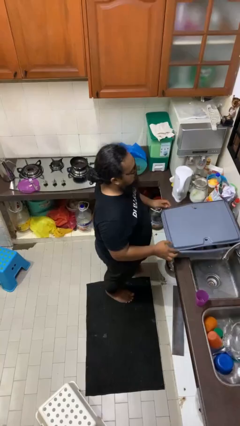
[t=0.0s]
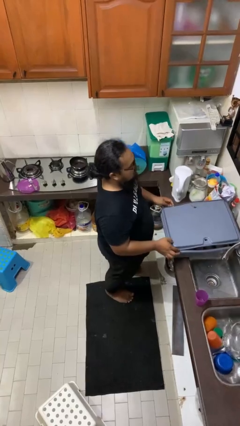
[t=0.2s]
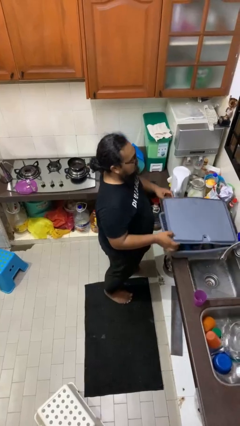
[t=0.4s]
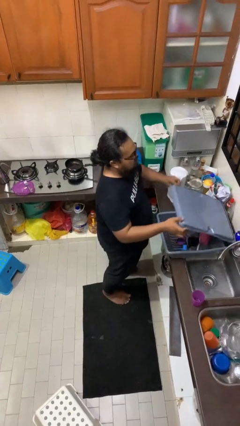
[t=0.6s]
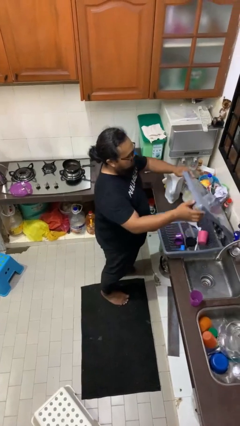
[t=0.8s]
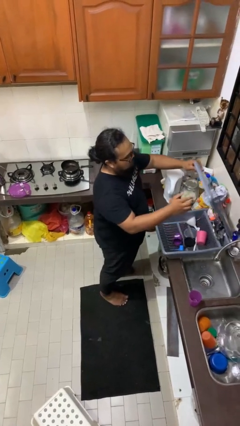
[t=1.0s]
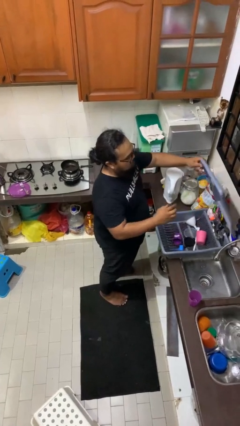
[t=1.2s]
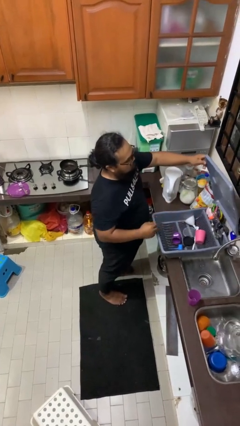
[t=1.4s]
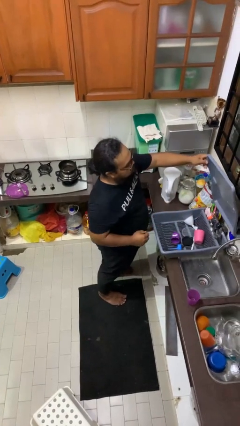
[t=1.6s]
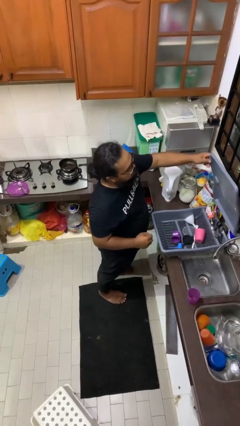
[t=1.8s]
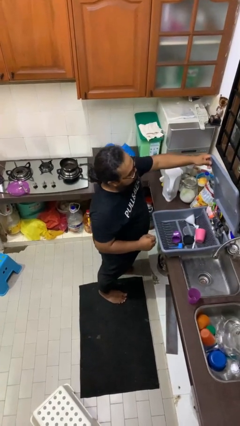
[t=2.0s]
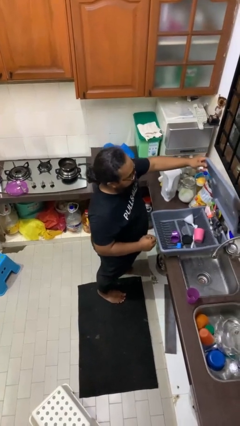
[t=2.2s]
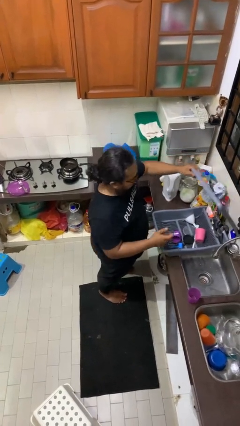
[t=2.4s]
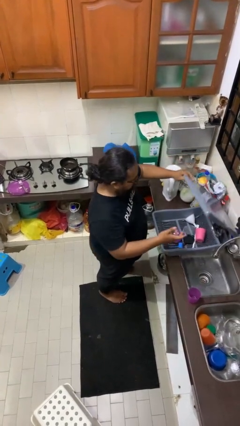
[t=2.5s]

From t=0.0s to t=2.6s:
person opens dishwasher

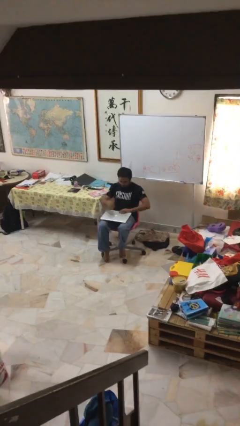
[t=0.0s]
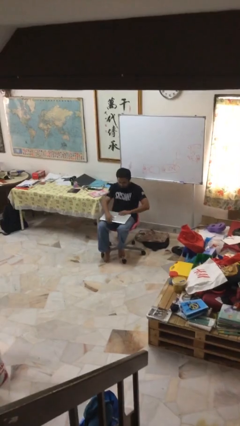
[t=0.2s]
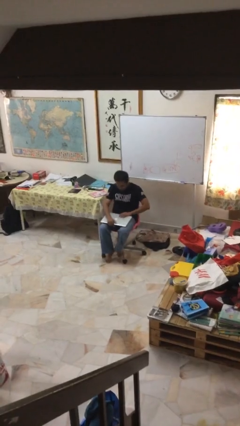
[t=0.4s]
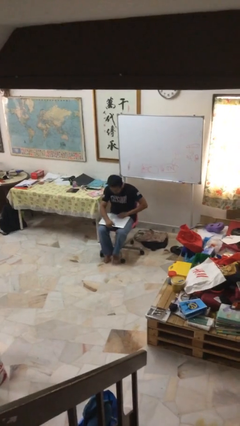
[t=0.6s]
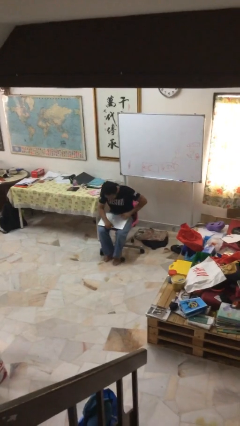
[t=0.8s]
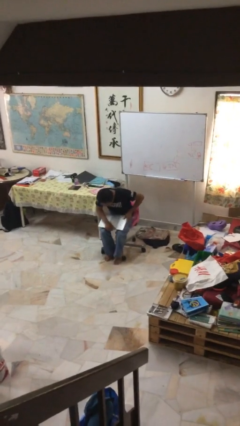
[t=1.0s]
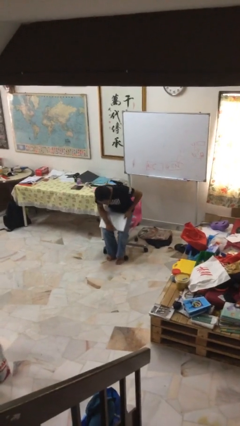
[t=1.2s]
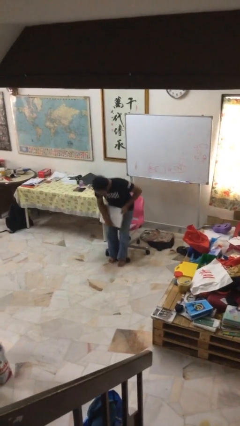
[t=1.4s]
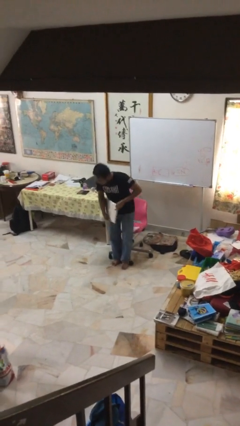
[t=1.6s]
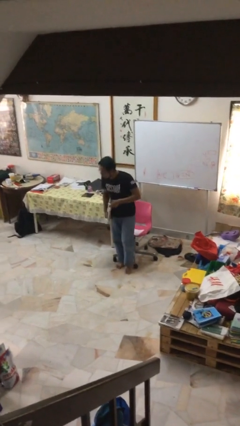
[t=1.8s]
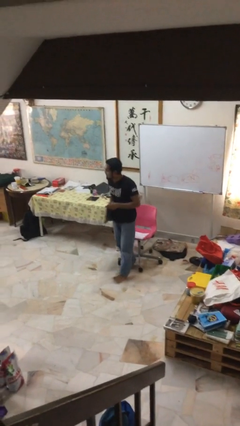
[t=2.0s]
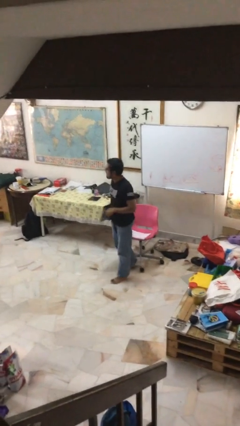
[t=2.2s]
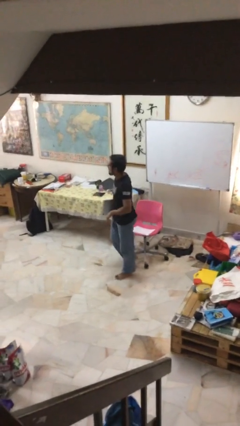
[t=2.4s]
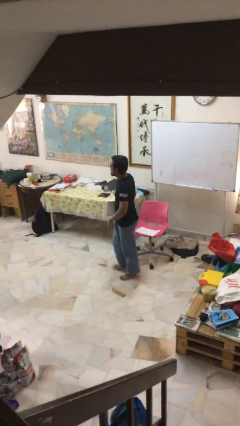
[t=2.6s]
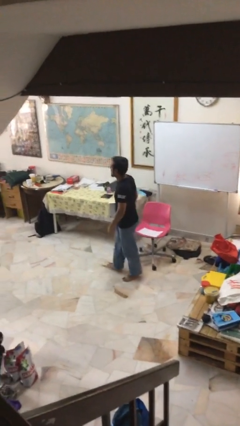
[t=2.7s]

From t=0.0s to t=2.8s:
person stands up

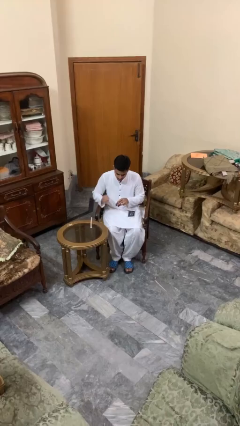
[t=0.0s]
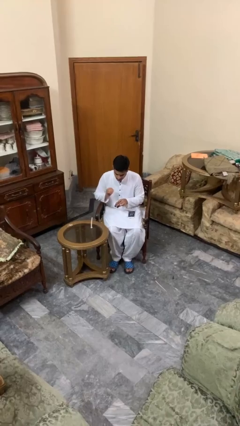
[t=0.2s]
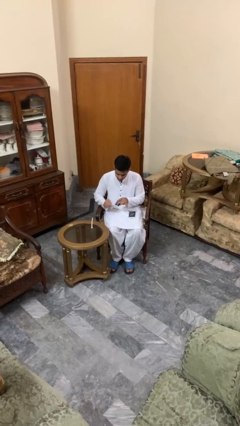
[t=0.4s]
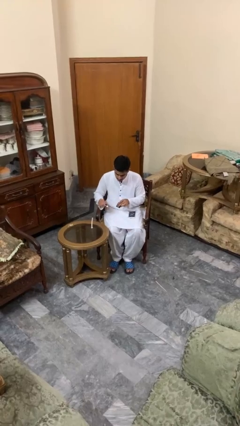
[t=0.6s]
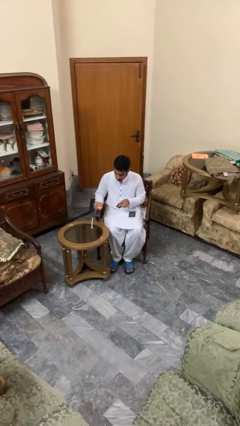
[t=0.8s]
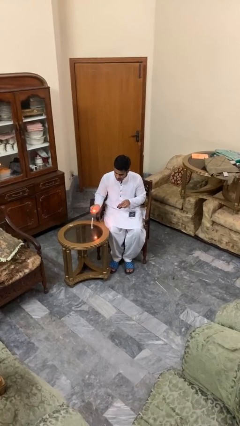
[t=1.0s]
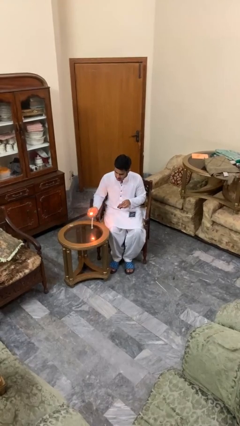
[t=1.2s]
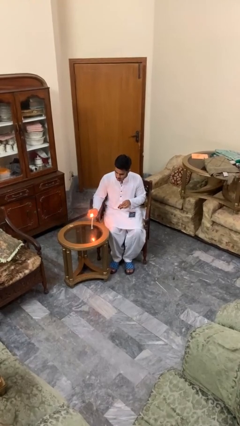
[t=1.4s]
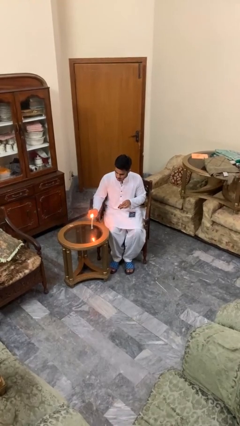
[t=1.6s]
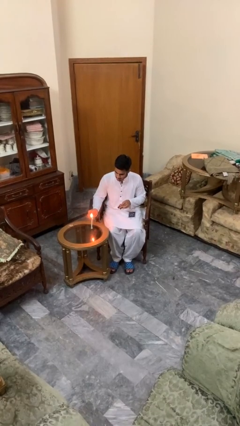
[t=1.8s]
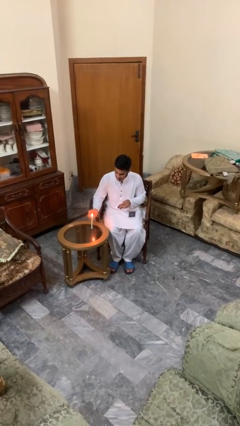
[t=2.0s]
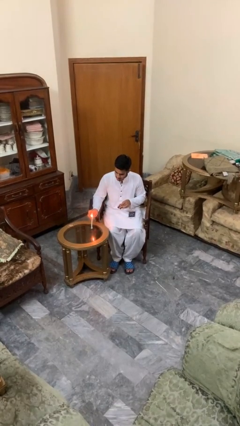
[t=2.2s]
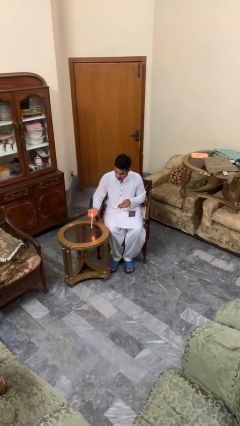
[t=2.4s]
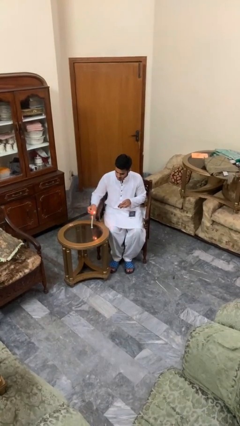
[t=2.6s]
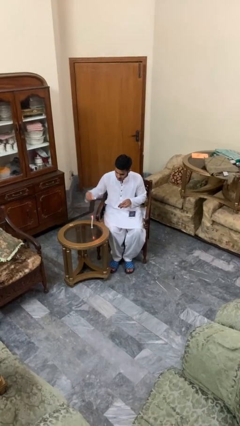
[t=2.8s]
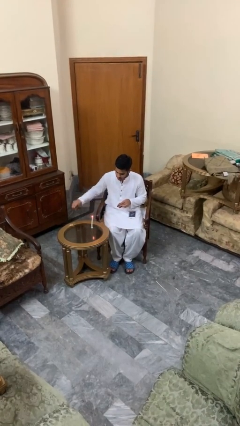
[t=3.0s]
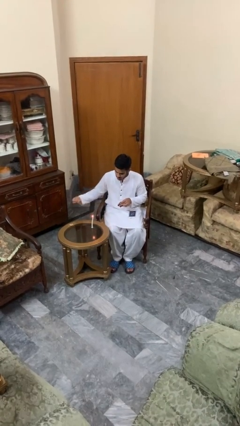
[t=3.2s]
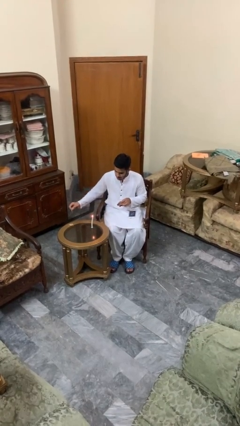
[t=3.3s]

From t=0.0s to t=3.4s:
person lights candle

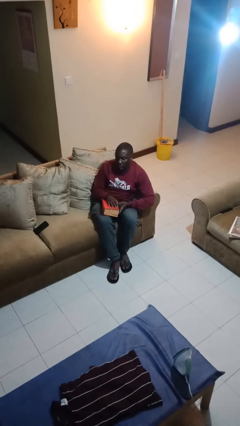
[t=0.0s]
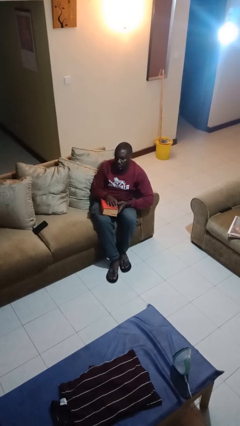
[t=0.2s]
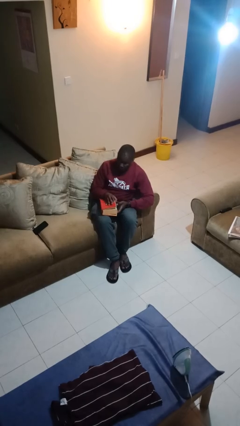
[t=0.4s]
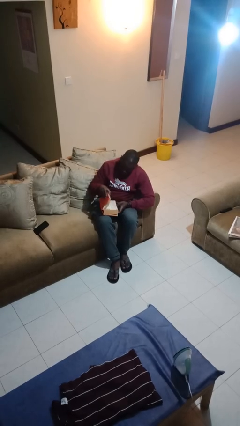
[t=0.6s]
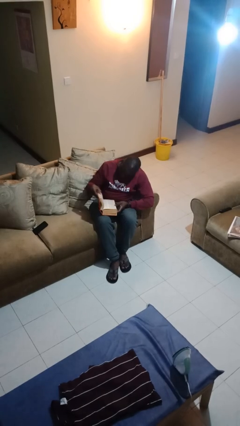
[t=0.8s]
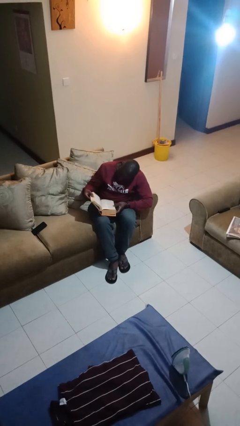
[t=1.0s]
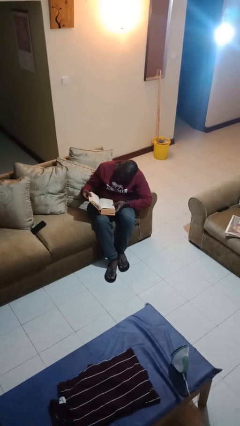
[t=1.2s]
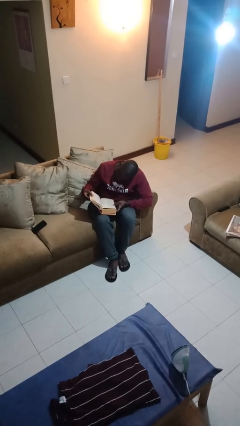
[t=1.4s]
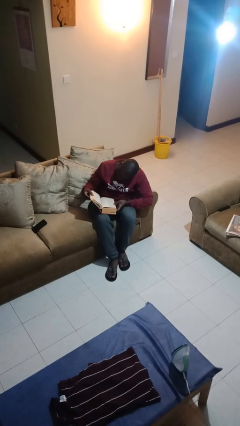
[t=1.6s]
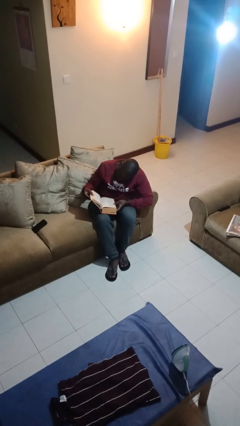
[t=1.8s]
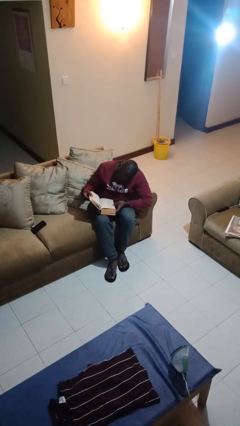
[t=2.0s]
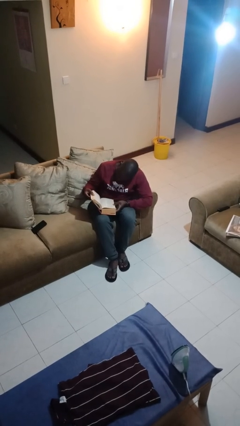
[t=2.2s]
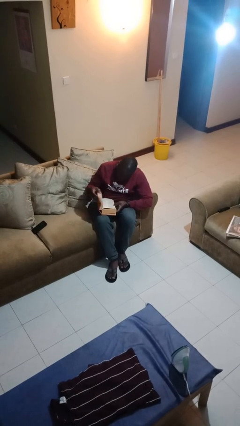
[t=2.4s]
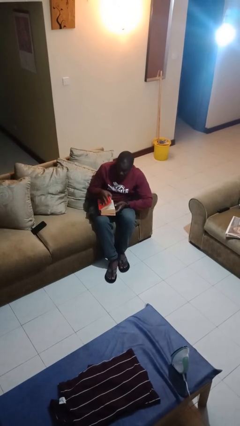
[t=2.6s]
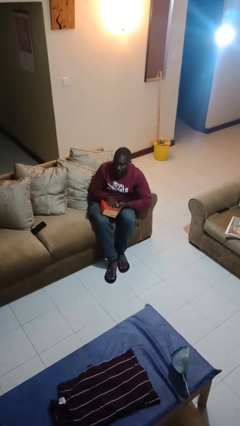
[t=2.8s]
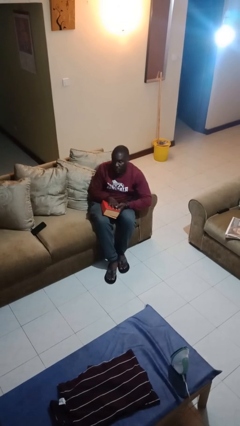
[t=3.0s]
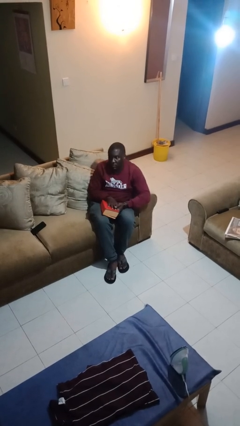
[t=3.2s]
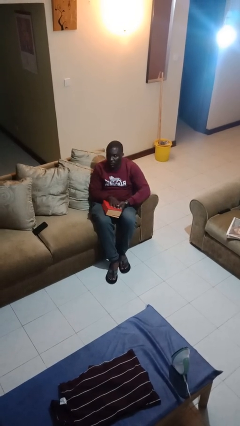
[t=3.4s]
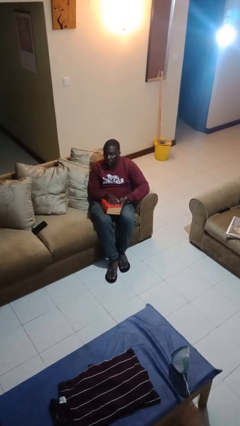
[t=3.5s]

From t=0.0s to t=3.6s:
person reads book

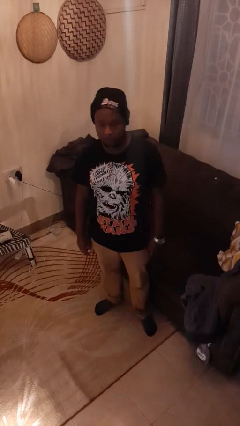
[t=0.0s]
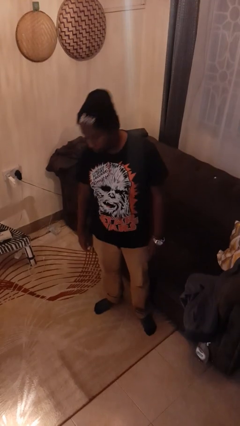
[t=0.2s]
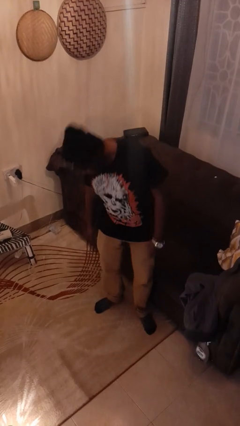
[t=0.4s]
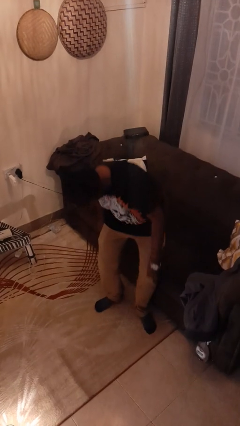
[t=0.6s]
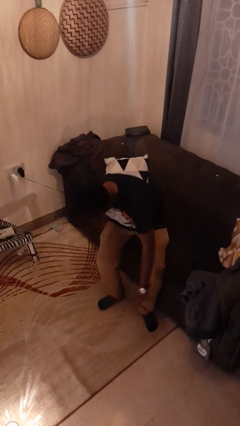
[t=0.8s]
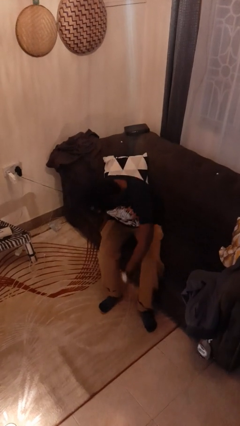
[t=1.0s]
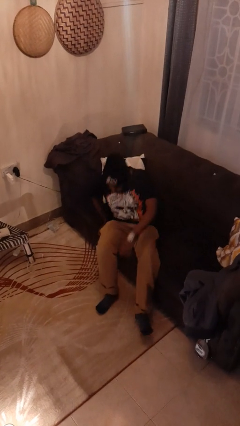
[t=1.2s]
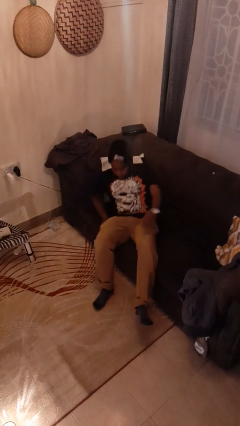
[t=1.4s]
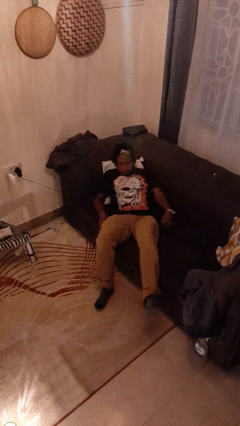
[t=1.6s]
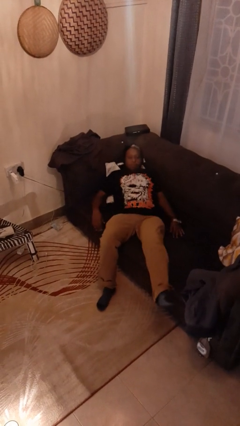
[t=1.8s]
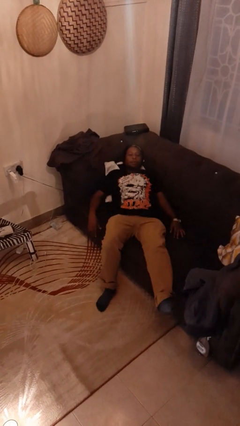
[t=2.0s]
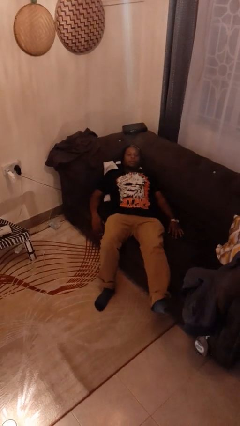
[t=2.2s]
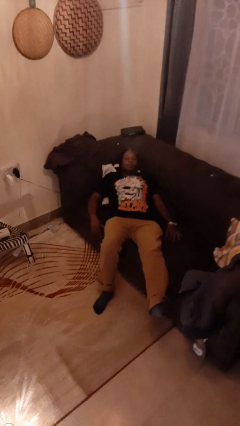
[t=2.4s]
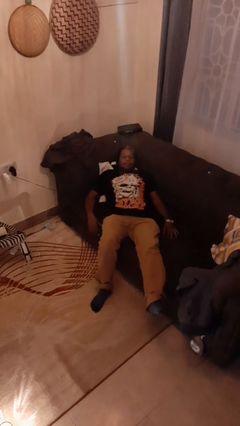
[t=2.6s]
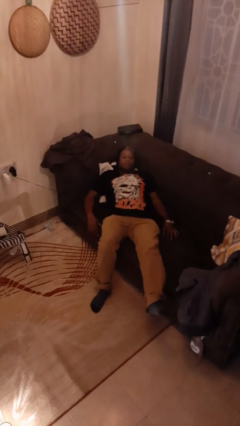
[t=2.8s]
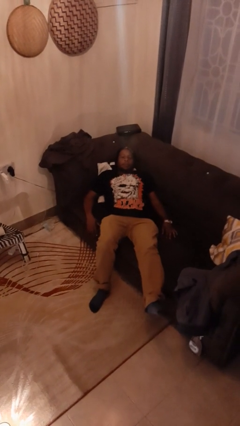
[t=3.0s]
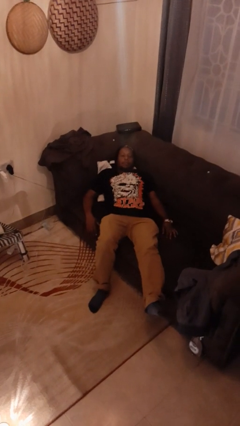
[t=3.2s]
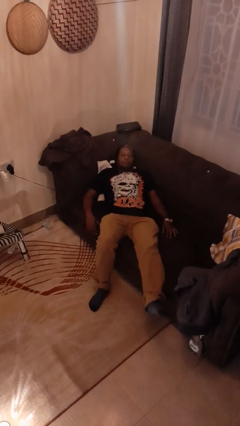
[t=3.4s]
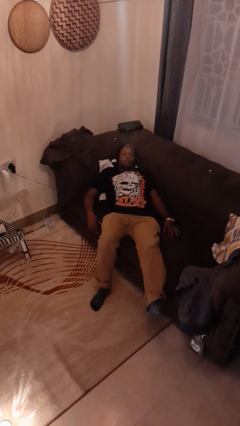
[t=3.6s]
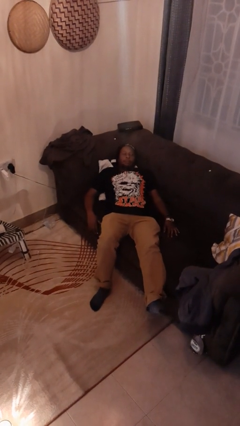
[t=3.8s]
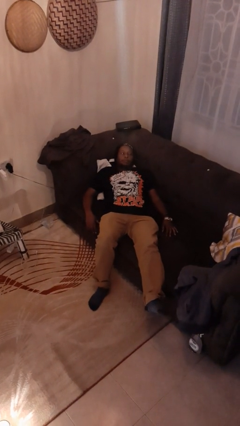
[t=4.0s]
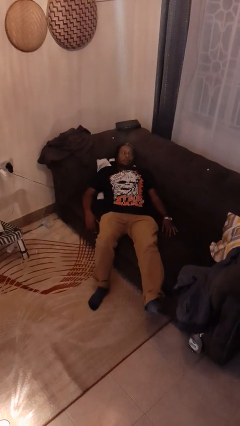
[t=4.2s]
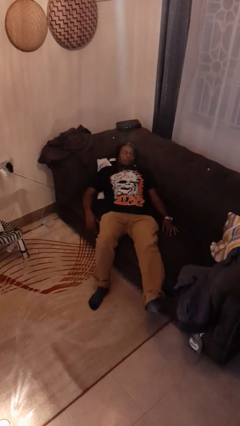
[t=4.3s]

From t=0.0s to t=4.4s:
person lies down on couch

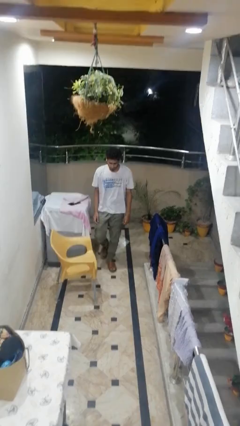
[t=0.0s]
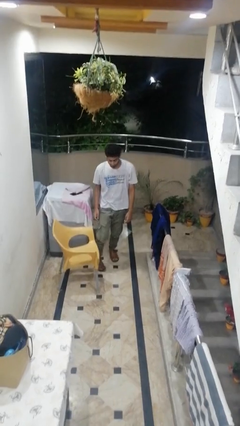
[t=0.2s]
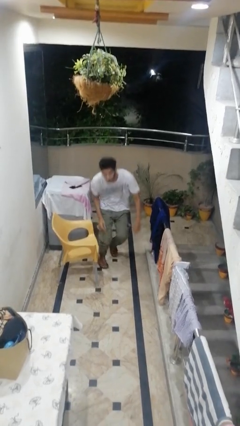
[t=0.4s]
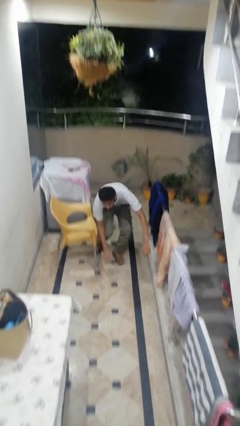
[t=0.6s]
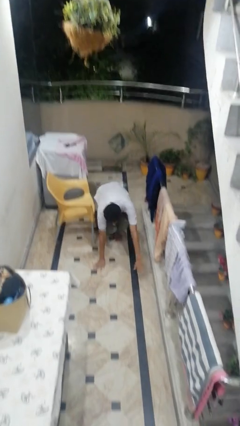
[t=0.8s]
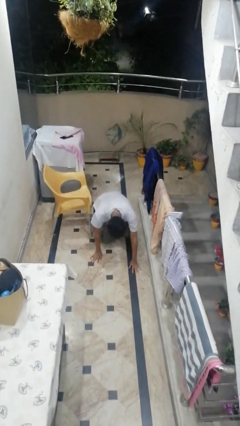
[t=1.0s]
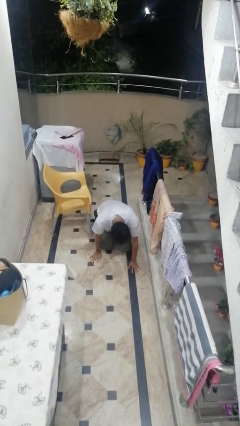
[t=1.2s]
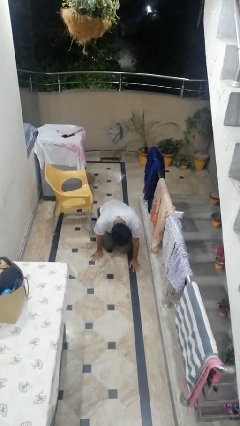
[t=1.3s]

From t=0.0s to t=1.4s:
person trips on object on floor
